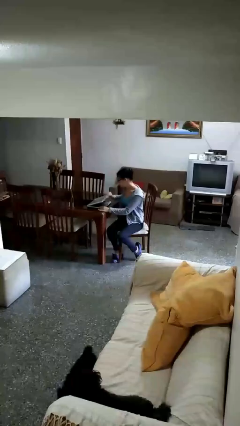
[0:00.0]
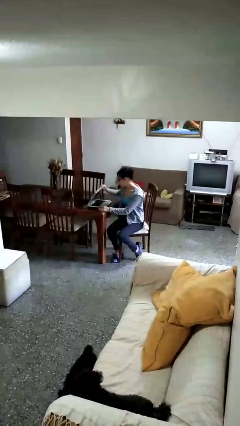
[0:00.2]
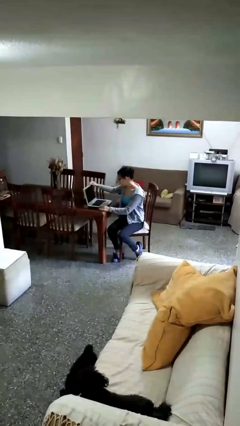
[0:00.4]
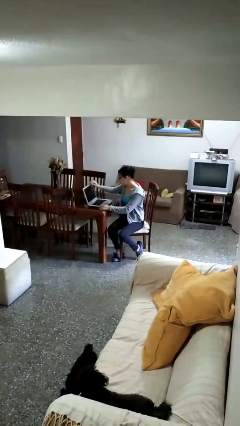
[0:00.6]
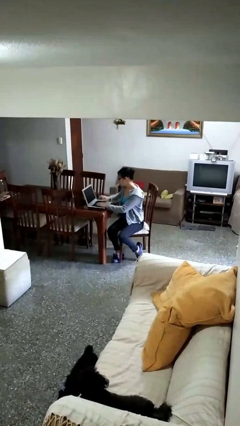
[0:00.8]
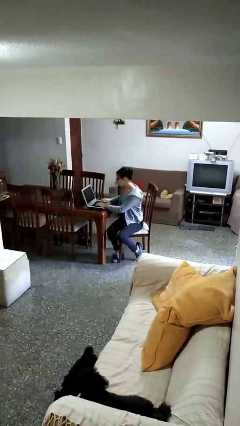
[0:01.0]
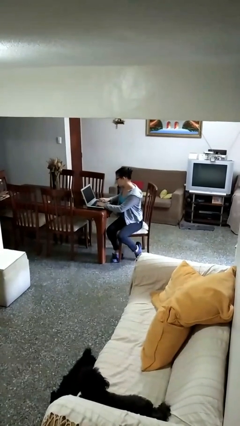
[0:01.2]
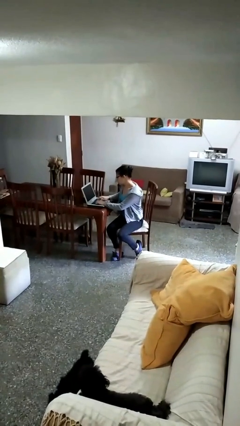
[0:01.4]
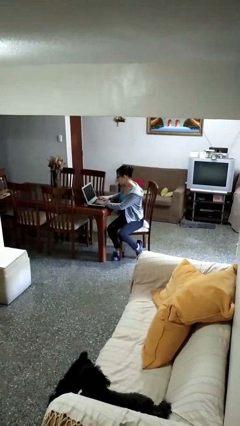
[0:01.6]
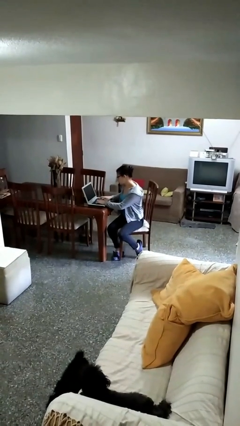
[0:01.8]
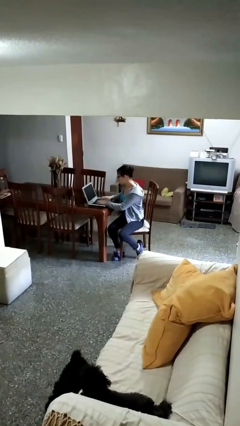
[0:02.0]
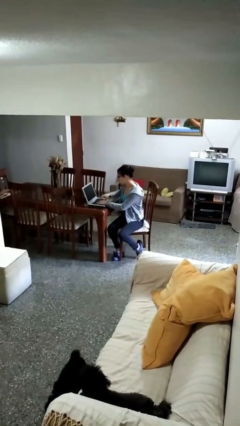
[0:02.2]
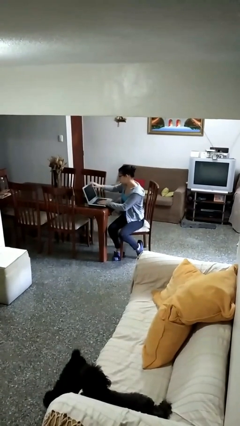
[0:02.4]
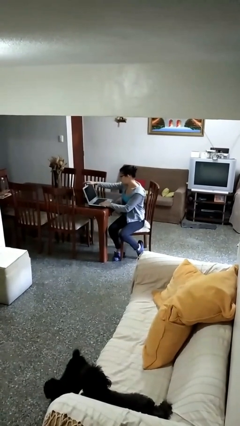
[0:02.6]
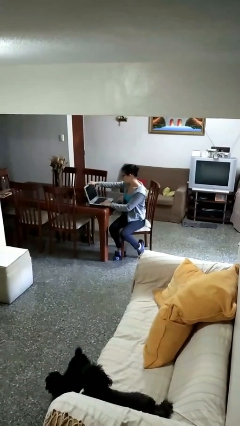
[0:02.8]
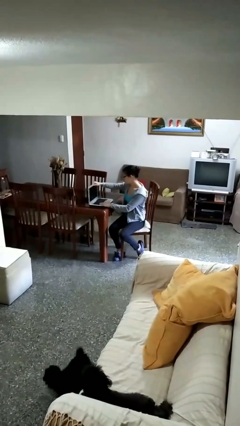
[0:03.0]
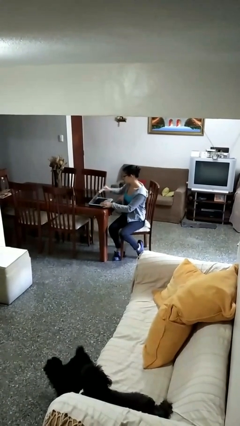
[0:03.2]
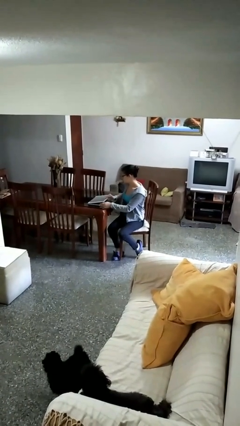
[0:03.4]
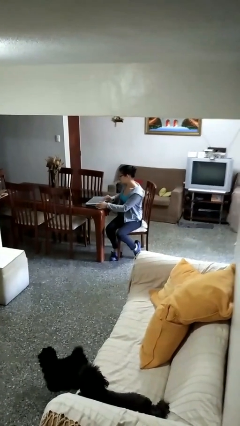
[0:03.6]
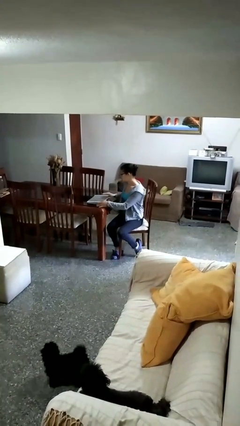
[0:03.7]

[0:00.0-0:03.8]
person interacts with laptop

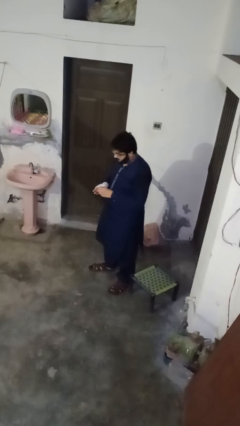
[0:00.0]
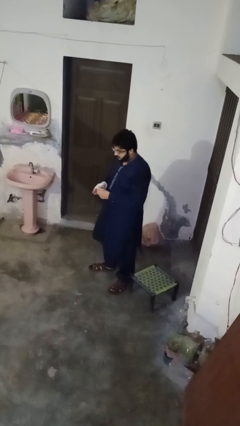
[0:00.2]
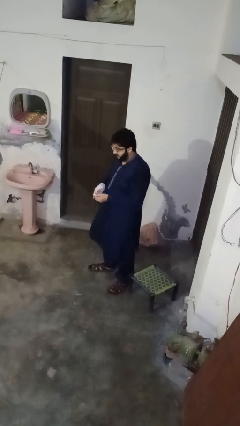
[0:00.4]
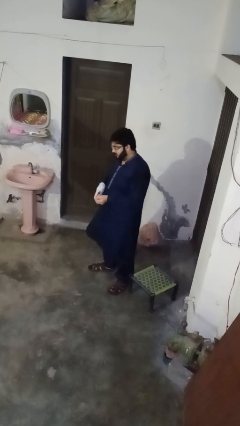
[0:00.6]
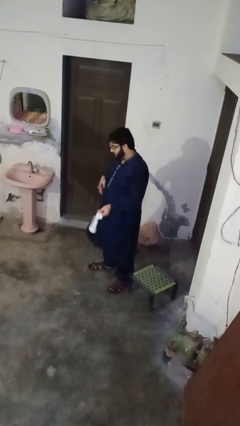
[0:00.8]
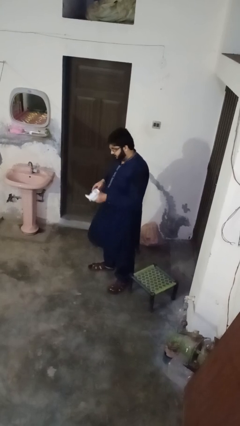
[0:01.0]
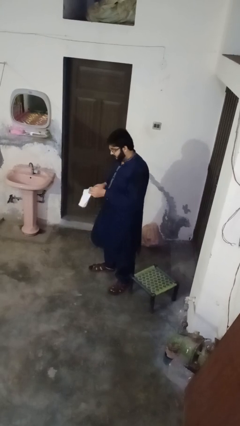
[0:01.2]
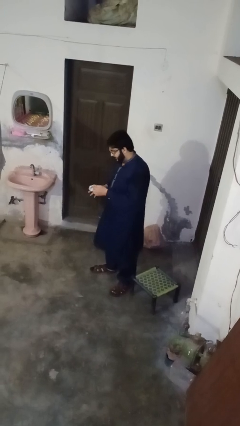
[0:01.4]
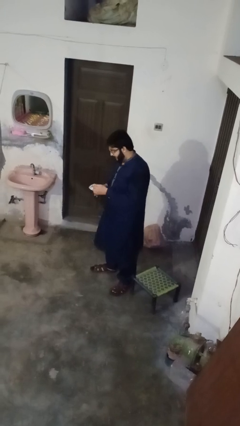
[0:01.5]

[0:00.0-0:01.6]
person takes off gloves

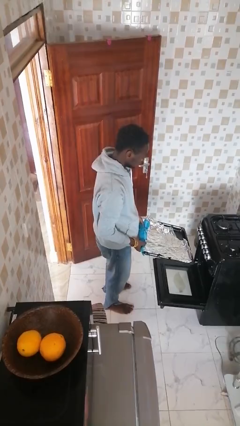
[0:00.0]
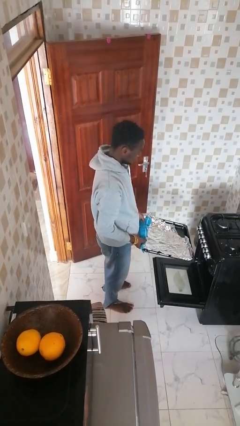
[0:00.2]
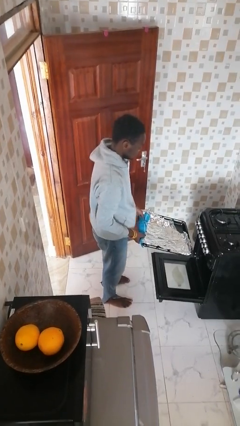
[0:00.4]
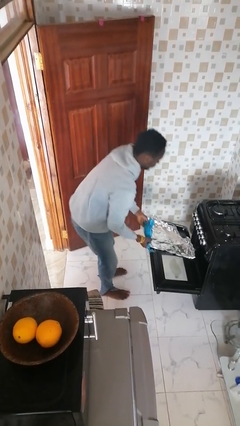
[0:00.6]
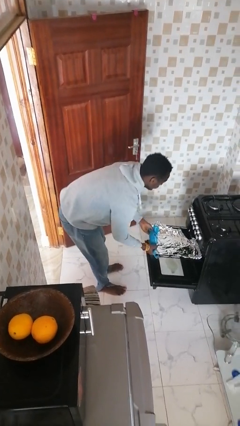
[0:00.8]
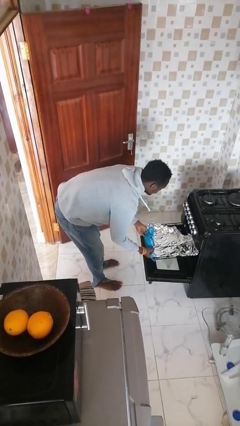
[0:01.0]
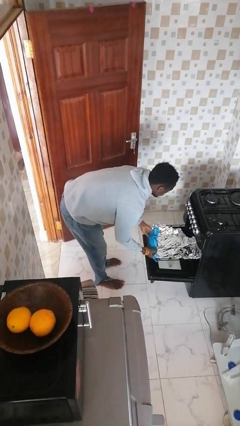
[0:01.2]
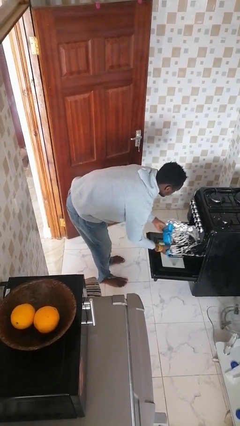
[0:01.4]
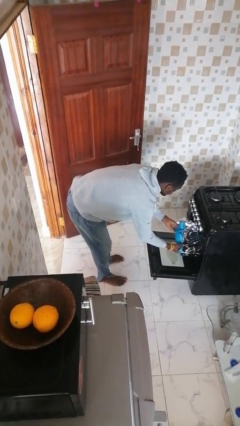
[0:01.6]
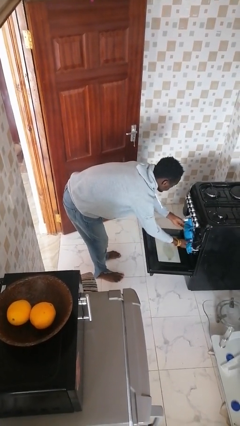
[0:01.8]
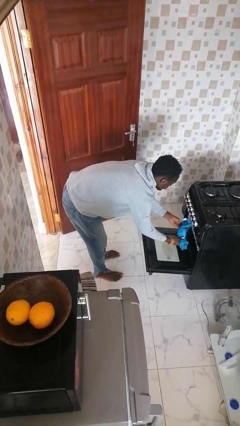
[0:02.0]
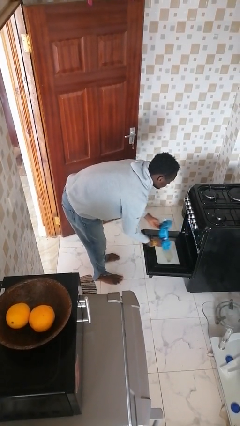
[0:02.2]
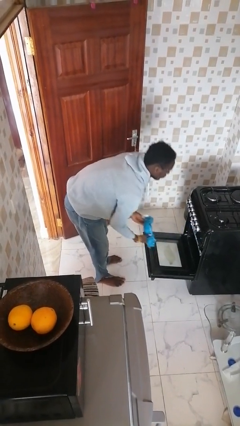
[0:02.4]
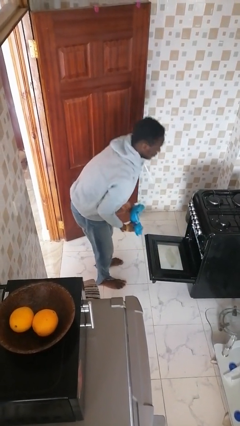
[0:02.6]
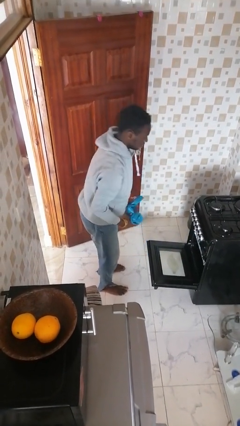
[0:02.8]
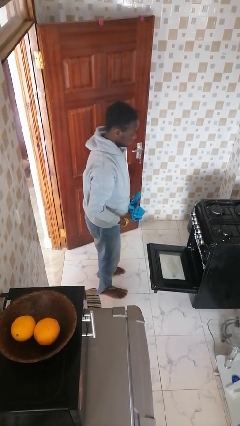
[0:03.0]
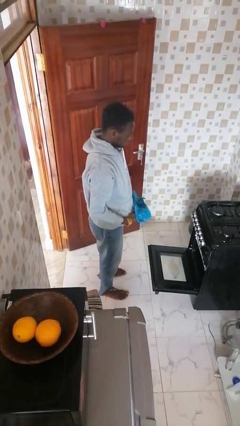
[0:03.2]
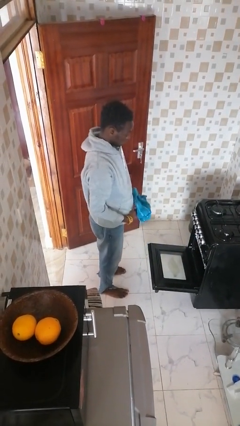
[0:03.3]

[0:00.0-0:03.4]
person puts object into oven

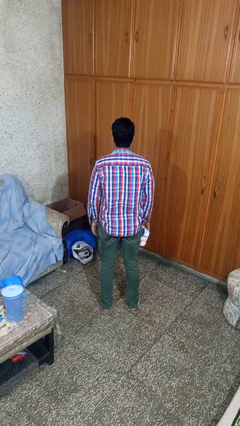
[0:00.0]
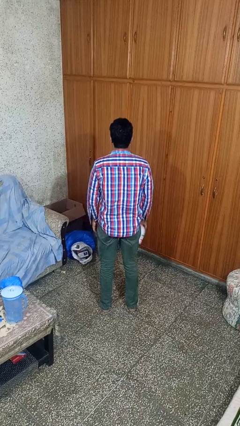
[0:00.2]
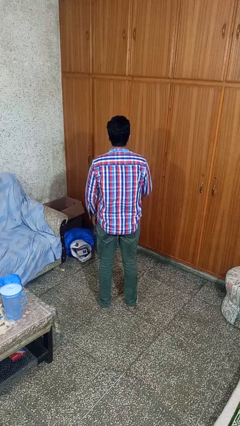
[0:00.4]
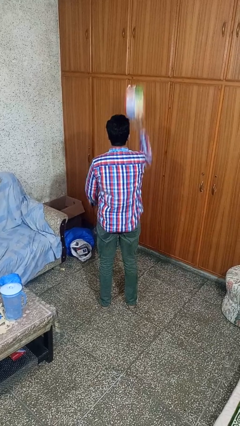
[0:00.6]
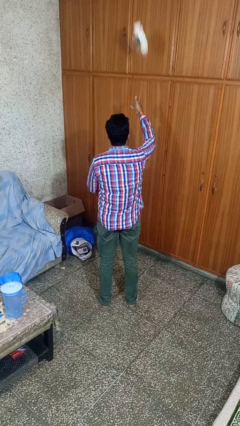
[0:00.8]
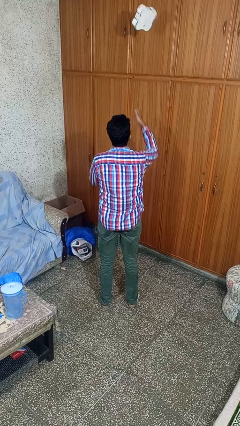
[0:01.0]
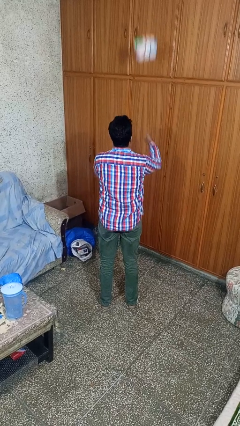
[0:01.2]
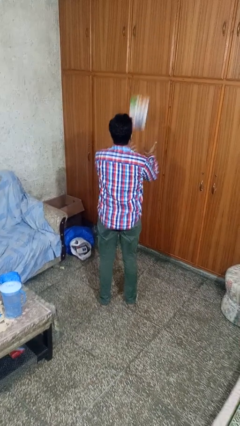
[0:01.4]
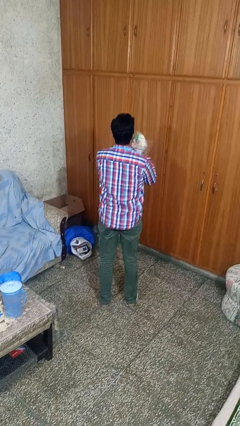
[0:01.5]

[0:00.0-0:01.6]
person drops object

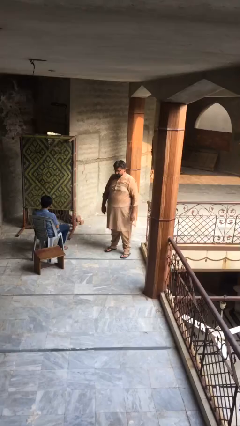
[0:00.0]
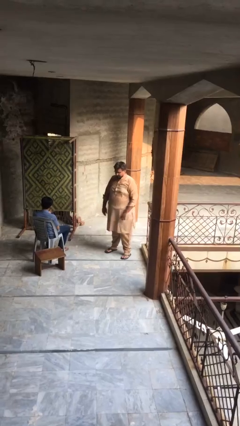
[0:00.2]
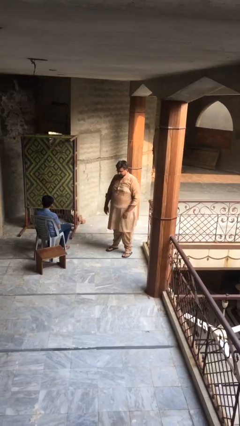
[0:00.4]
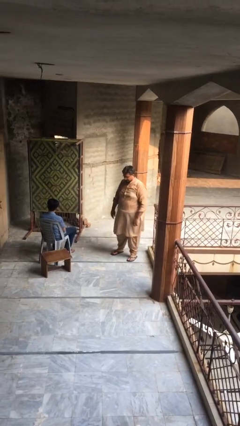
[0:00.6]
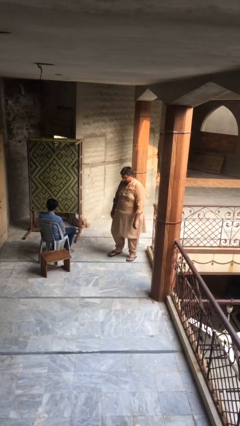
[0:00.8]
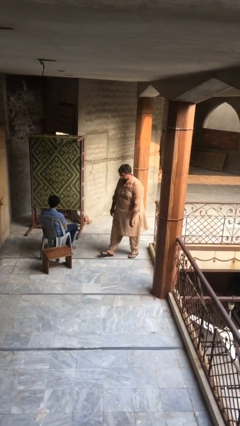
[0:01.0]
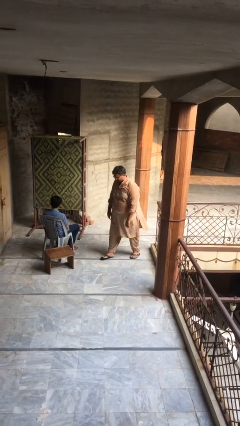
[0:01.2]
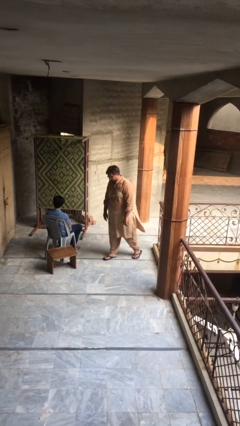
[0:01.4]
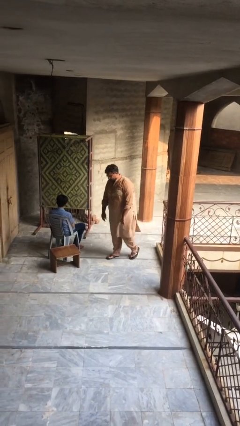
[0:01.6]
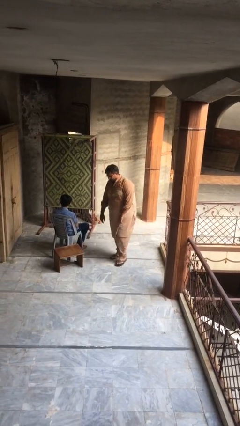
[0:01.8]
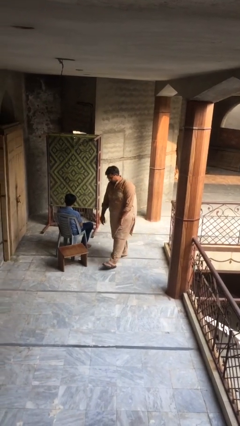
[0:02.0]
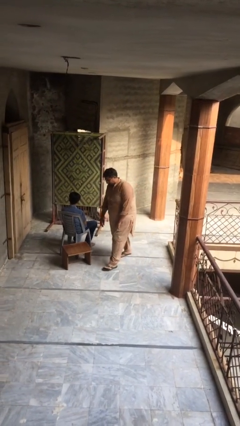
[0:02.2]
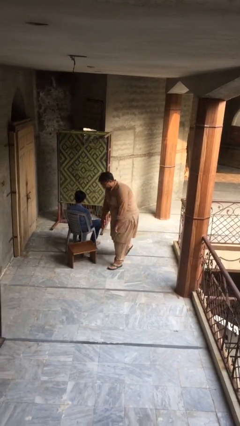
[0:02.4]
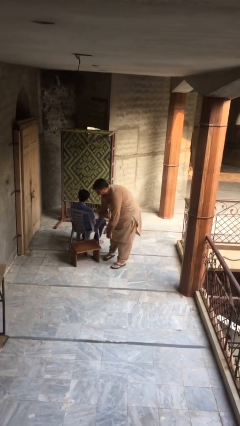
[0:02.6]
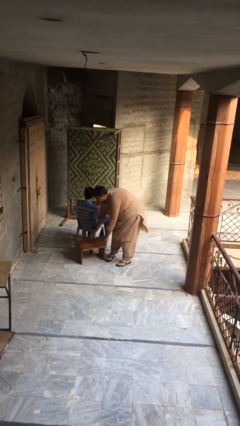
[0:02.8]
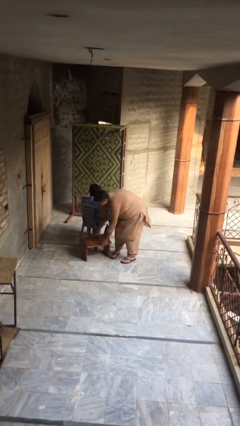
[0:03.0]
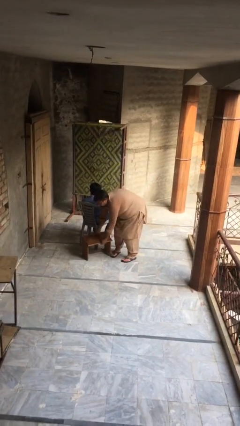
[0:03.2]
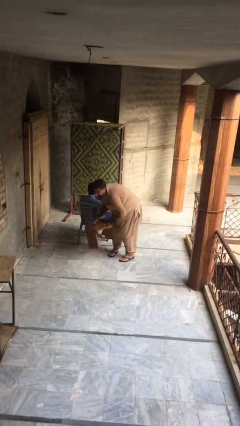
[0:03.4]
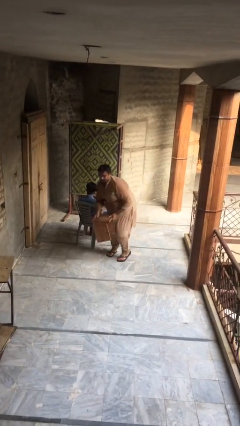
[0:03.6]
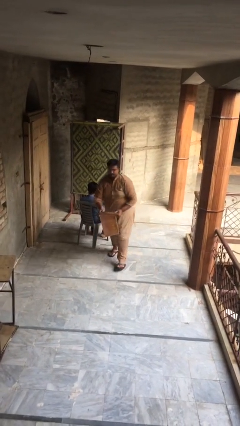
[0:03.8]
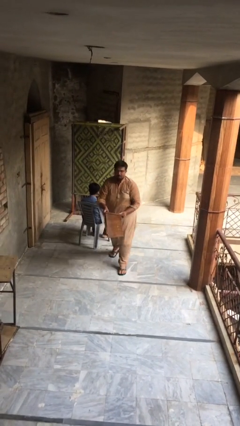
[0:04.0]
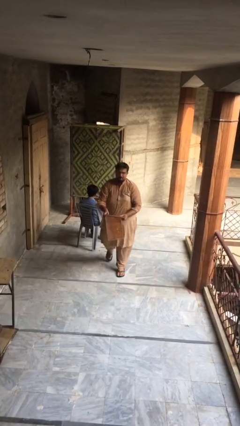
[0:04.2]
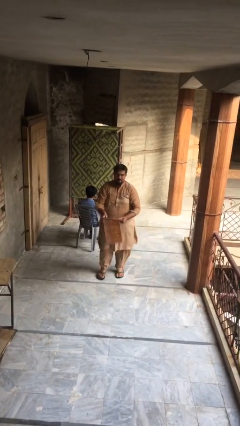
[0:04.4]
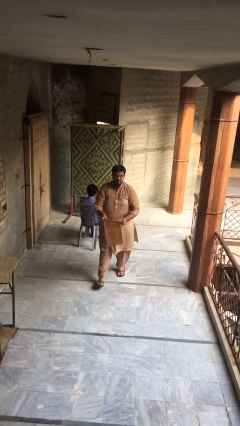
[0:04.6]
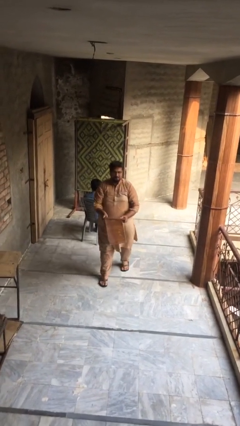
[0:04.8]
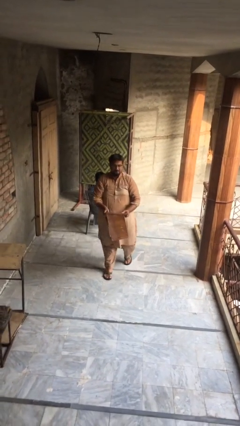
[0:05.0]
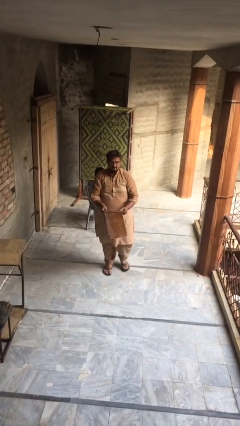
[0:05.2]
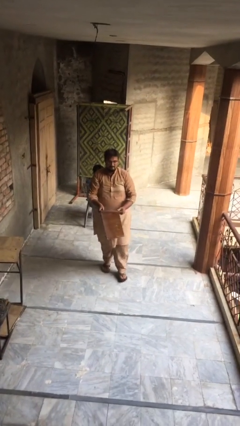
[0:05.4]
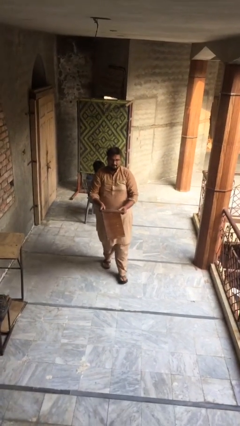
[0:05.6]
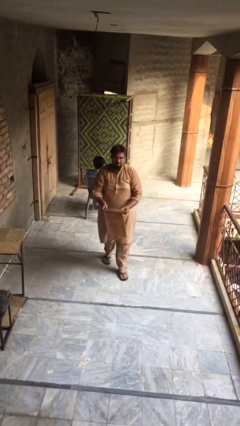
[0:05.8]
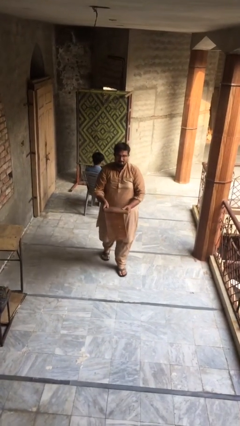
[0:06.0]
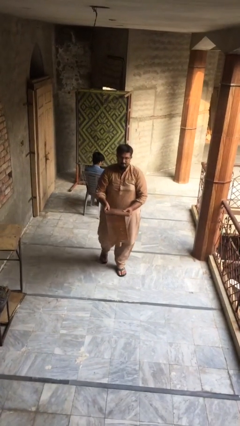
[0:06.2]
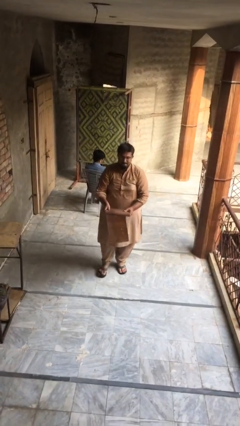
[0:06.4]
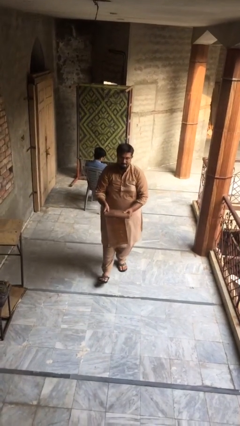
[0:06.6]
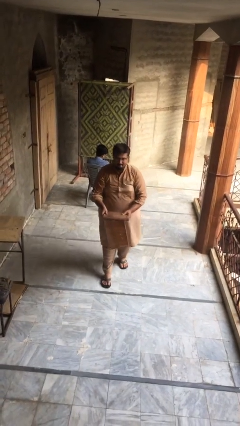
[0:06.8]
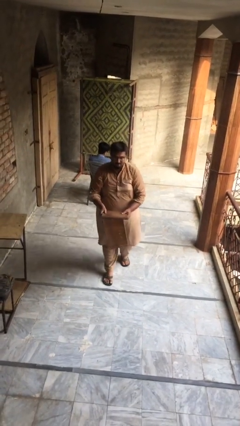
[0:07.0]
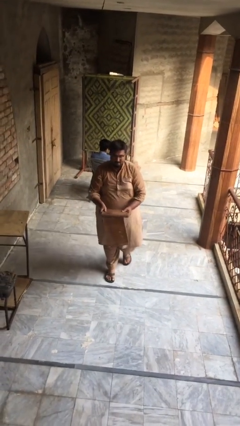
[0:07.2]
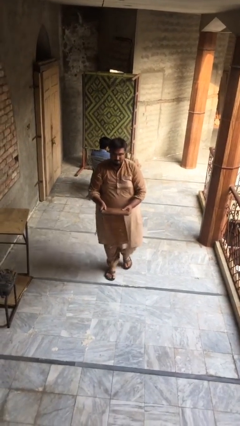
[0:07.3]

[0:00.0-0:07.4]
person steals object from person
